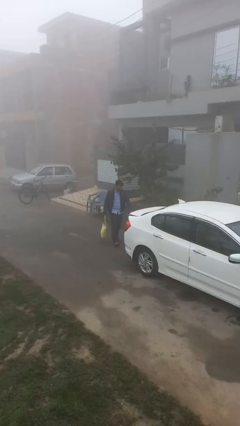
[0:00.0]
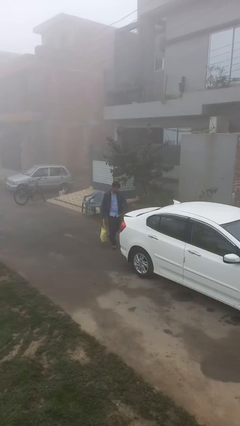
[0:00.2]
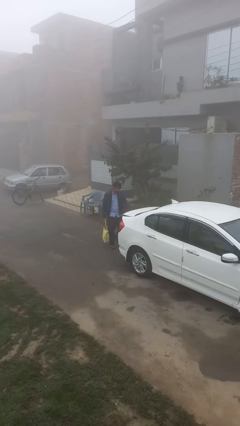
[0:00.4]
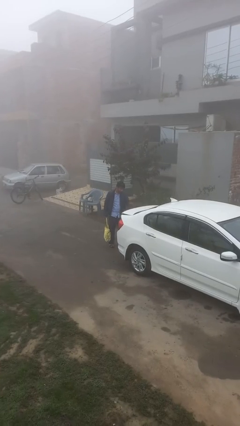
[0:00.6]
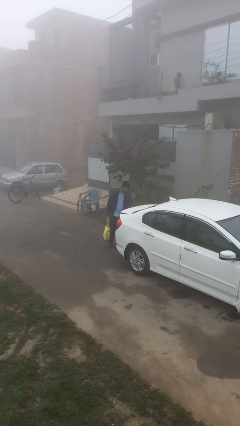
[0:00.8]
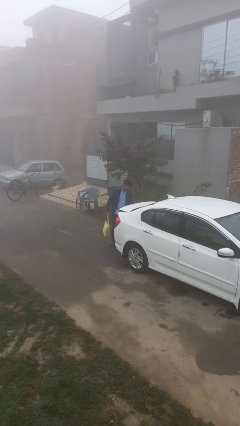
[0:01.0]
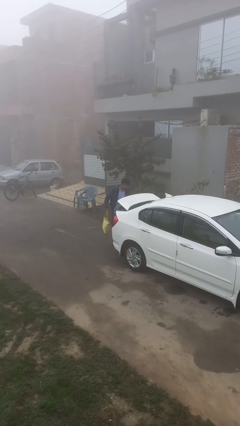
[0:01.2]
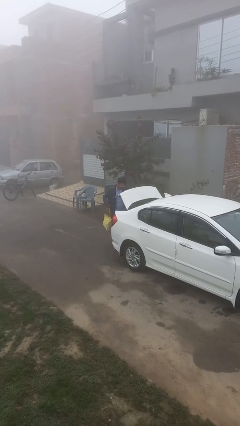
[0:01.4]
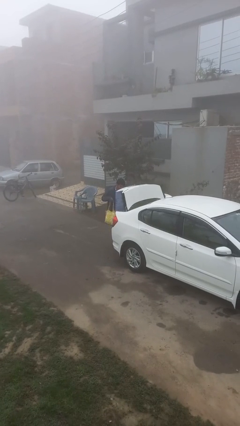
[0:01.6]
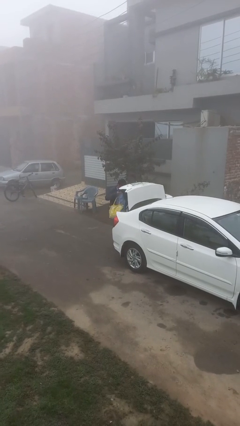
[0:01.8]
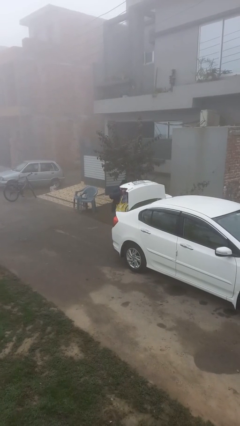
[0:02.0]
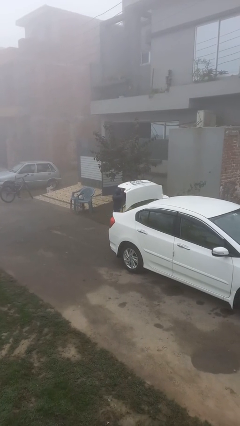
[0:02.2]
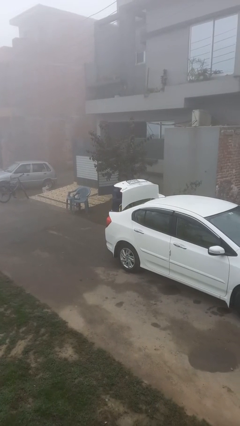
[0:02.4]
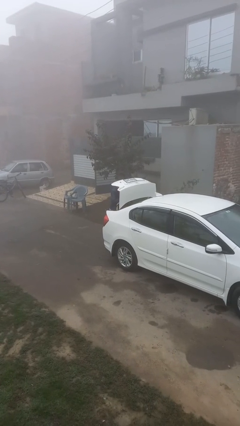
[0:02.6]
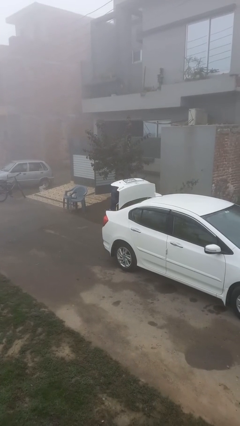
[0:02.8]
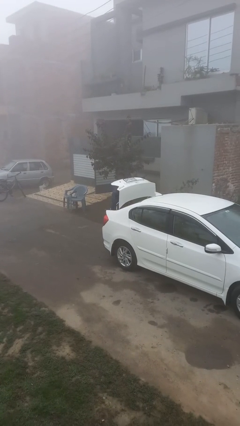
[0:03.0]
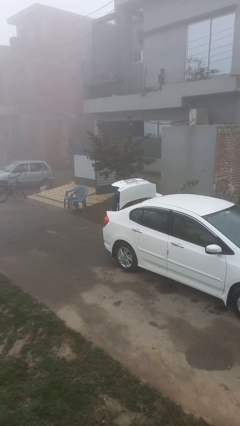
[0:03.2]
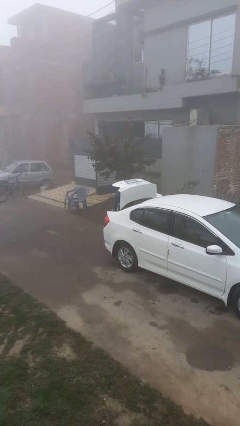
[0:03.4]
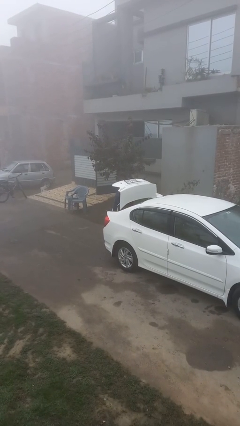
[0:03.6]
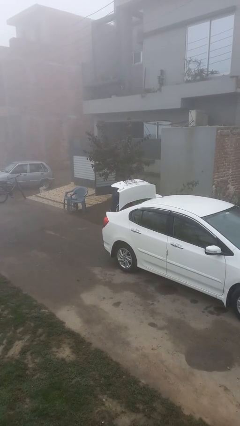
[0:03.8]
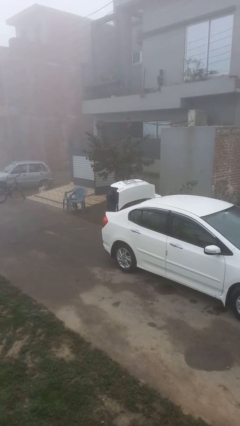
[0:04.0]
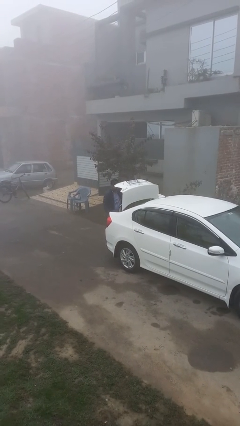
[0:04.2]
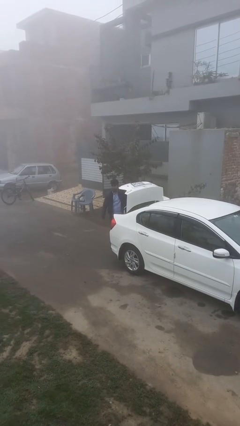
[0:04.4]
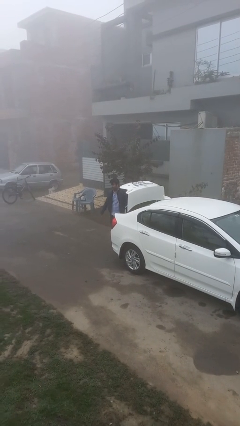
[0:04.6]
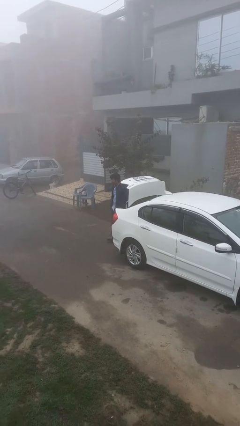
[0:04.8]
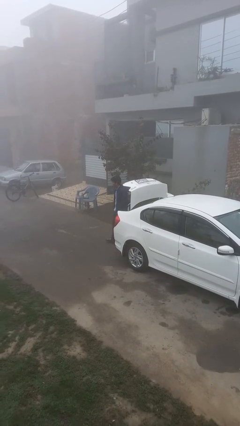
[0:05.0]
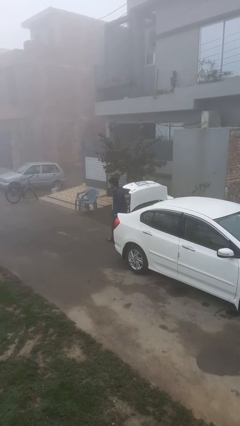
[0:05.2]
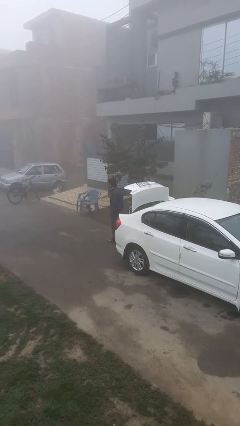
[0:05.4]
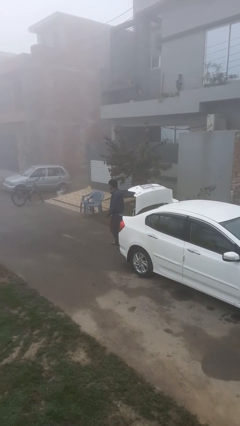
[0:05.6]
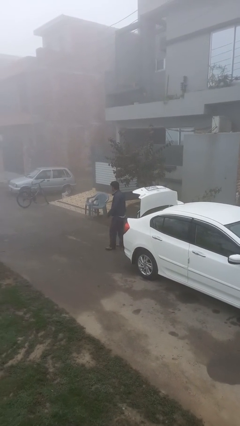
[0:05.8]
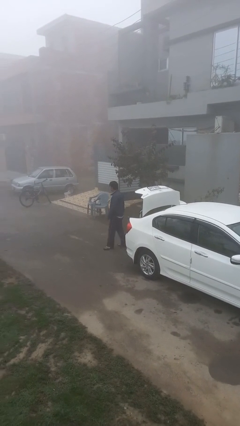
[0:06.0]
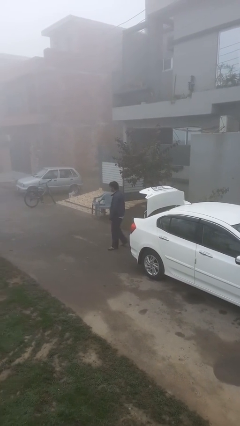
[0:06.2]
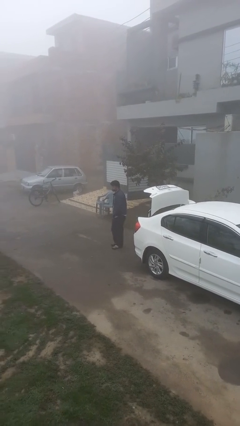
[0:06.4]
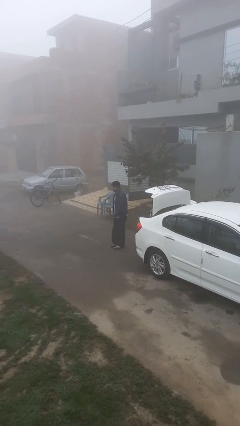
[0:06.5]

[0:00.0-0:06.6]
person loads car

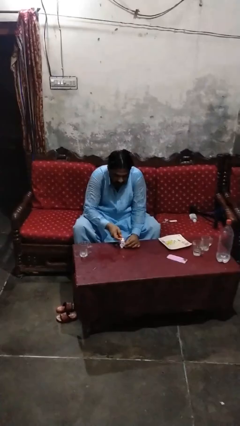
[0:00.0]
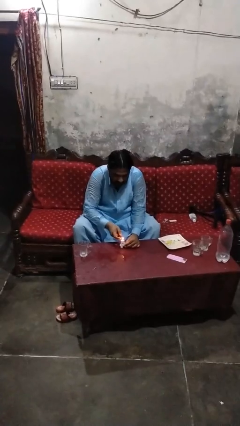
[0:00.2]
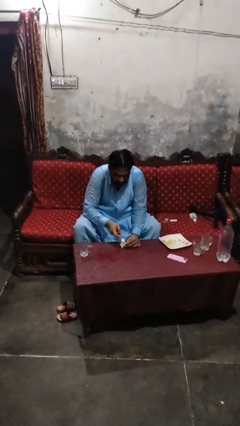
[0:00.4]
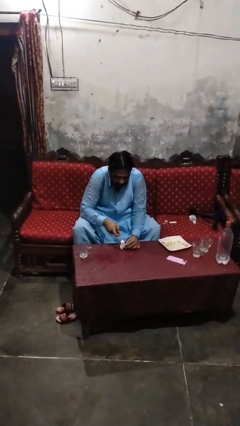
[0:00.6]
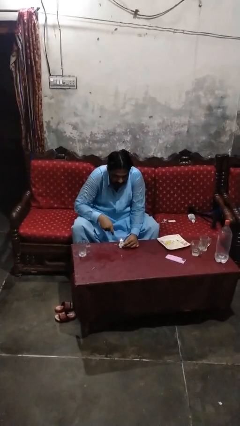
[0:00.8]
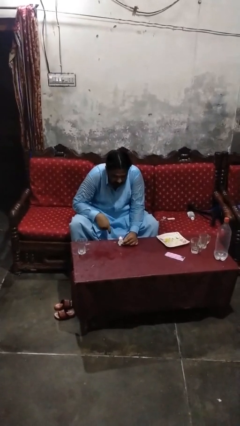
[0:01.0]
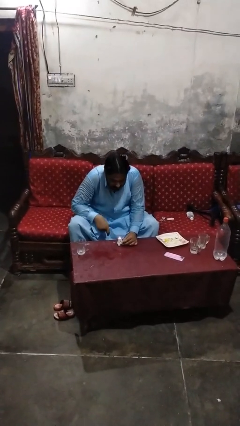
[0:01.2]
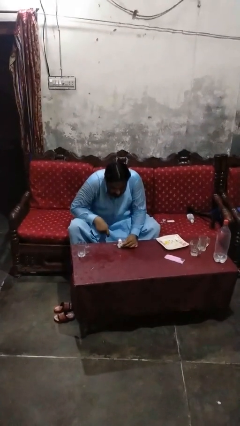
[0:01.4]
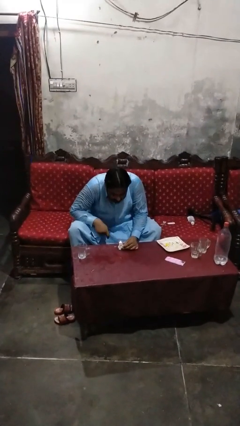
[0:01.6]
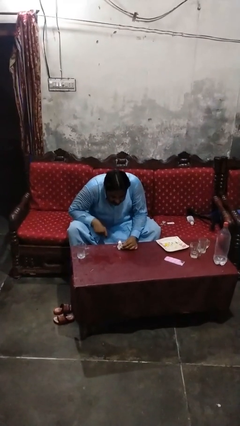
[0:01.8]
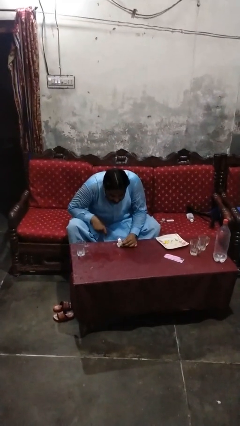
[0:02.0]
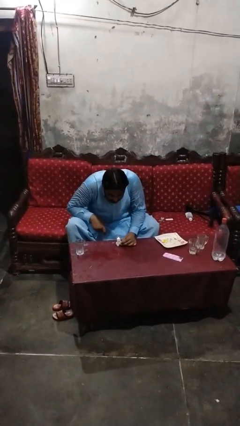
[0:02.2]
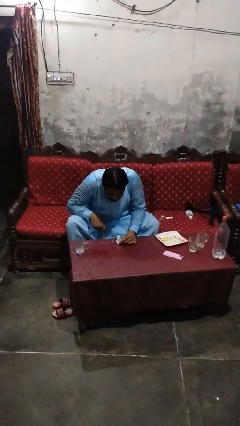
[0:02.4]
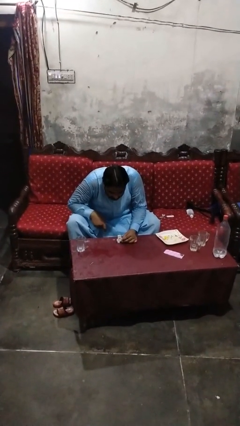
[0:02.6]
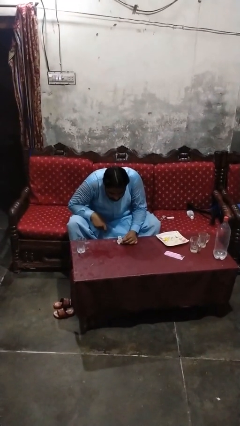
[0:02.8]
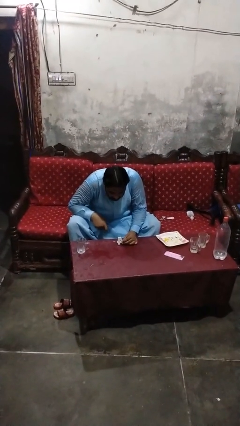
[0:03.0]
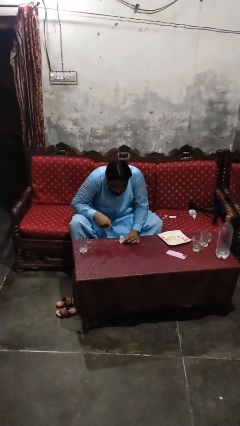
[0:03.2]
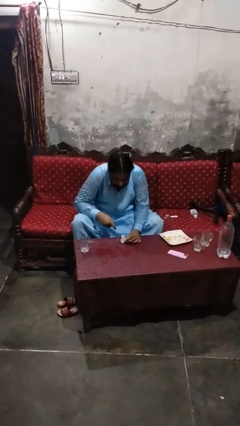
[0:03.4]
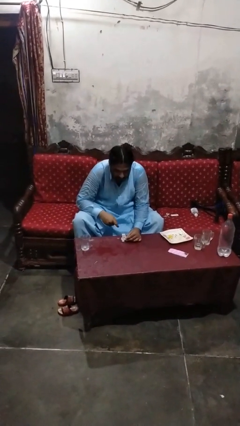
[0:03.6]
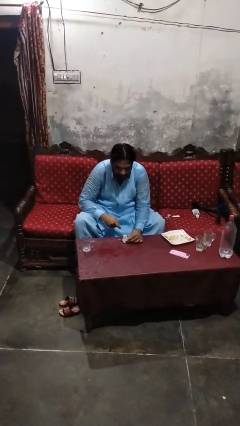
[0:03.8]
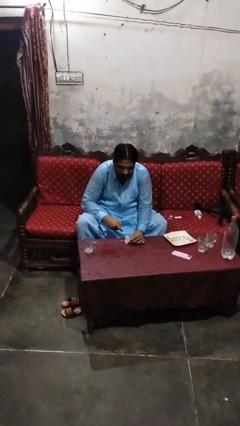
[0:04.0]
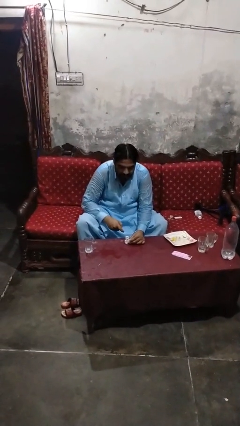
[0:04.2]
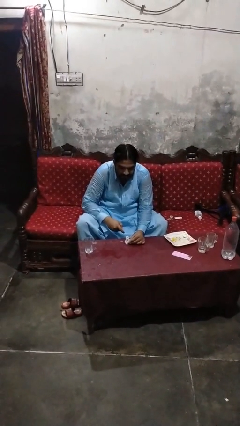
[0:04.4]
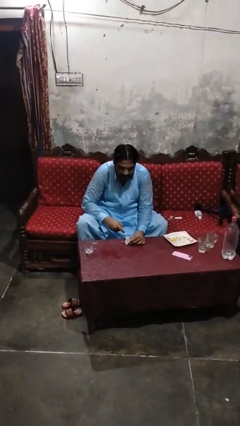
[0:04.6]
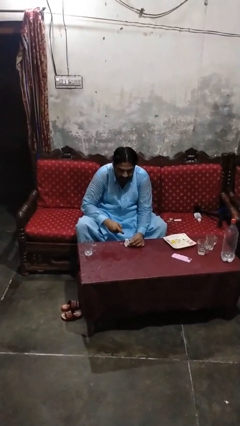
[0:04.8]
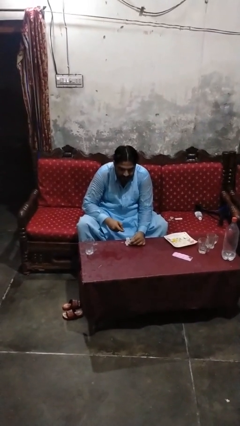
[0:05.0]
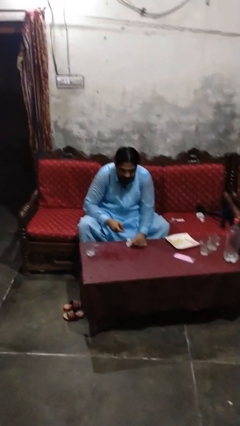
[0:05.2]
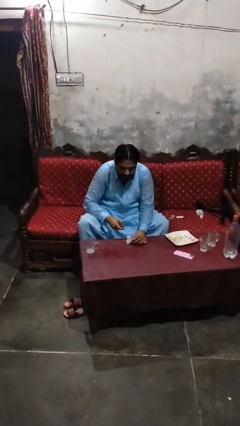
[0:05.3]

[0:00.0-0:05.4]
person extinguishes candle

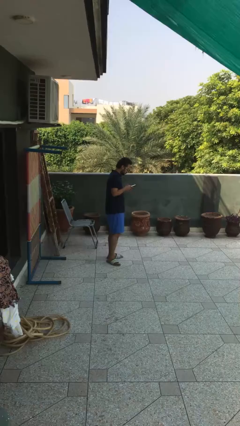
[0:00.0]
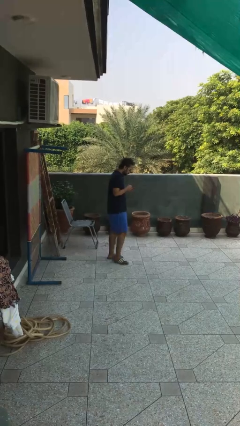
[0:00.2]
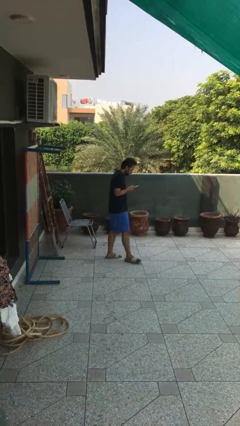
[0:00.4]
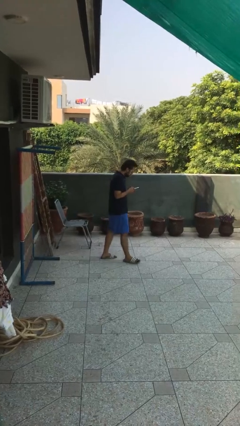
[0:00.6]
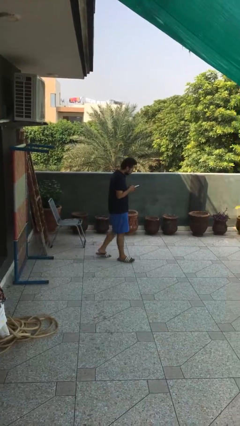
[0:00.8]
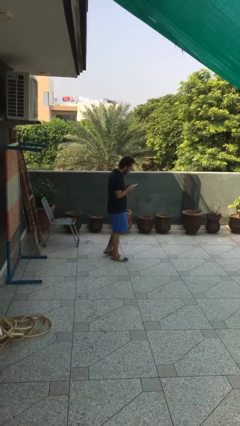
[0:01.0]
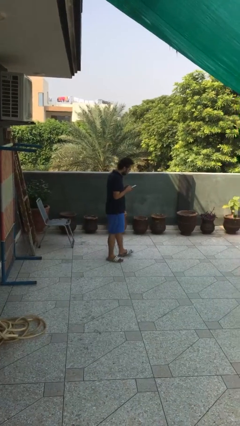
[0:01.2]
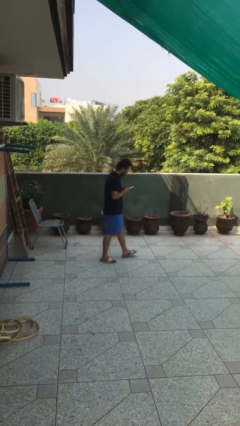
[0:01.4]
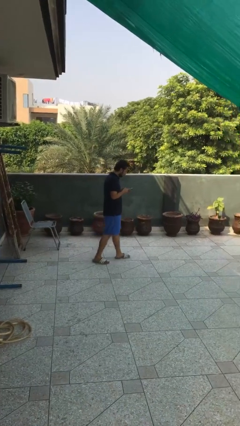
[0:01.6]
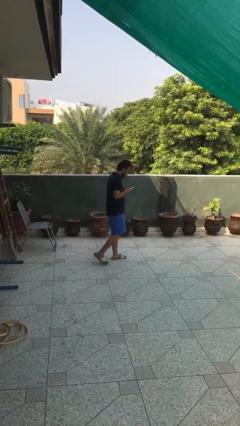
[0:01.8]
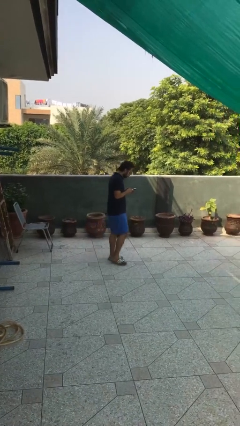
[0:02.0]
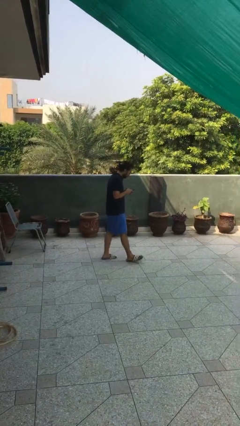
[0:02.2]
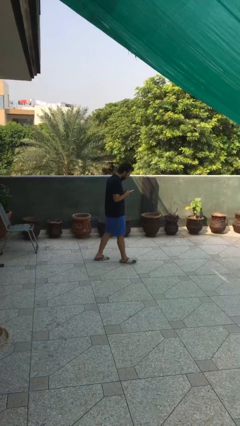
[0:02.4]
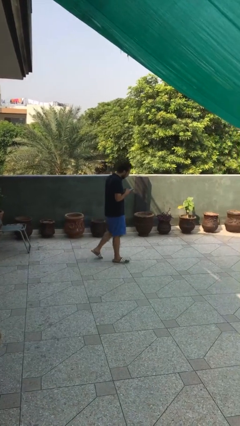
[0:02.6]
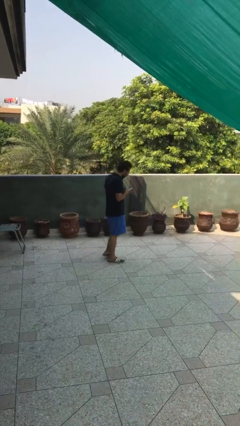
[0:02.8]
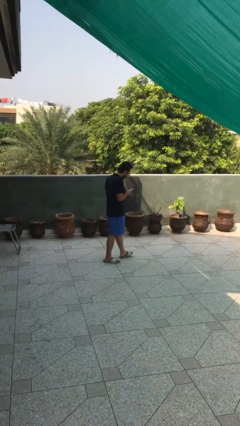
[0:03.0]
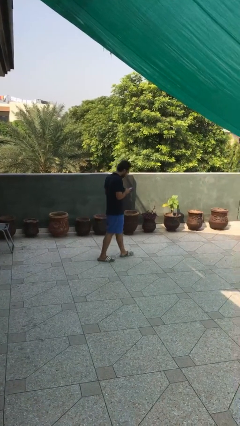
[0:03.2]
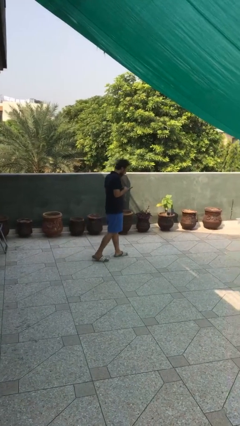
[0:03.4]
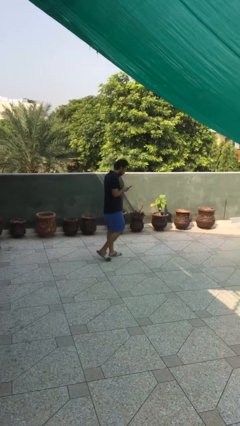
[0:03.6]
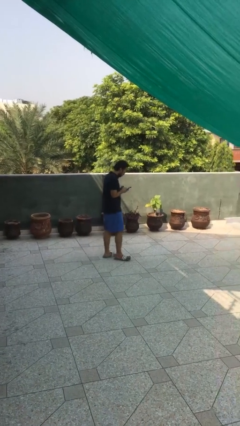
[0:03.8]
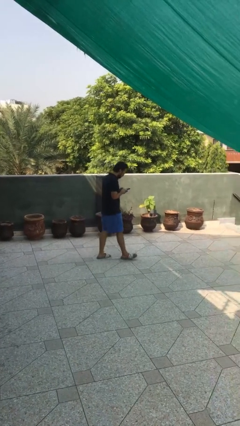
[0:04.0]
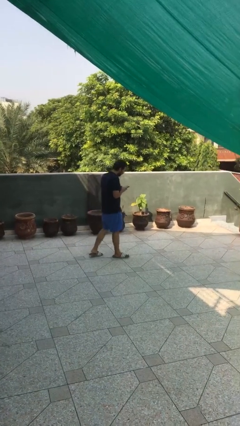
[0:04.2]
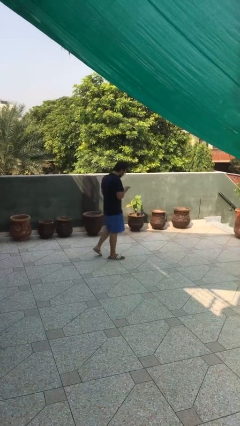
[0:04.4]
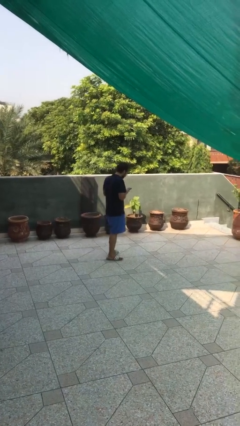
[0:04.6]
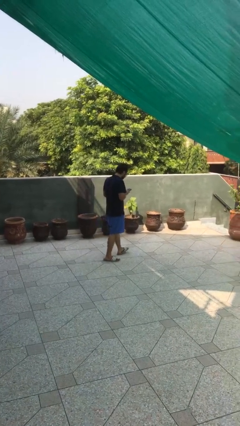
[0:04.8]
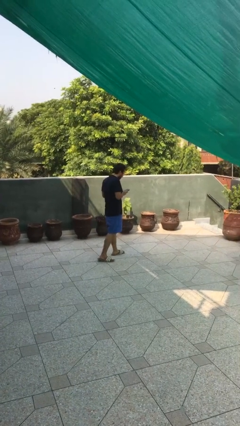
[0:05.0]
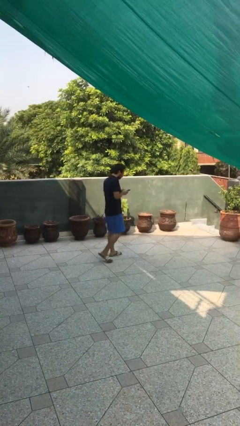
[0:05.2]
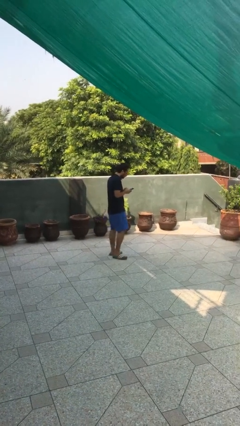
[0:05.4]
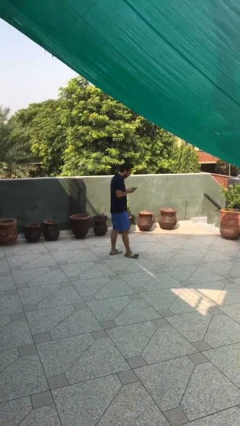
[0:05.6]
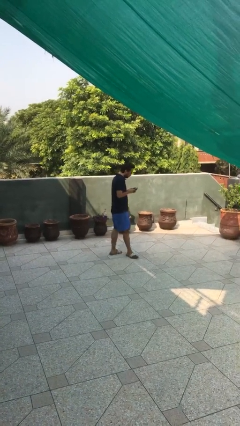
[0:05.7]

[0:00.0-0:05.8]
person texts on phone
